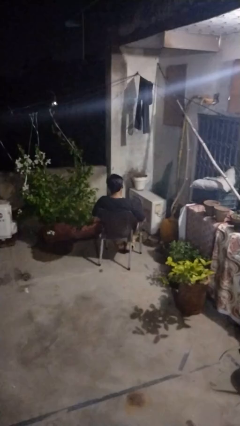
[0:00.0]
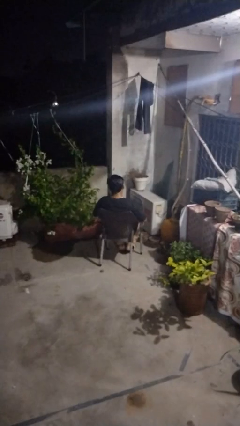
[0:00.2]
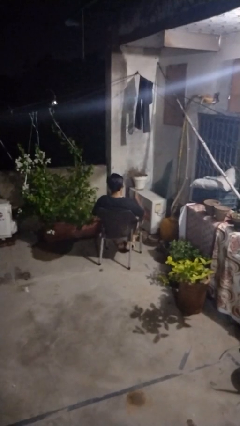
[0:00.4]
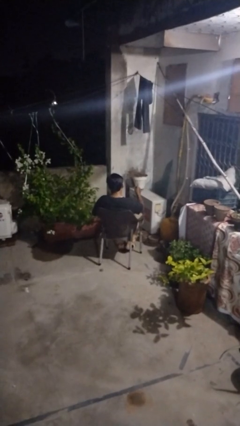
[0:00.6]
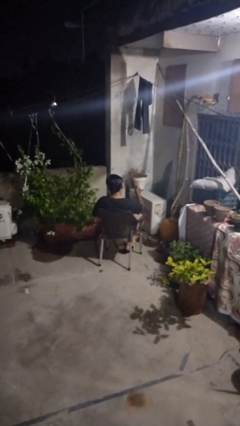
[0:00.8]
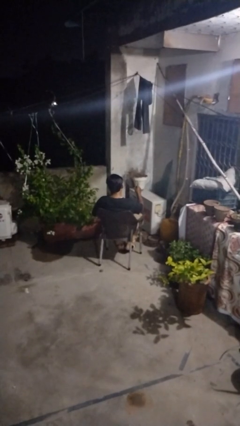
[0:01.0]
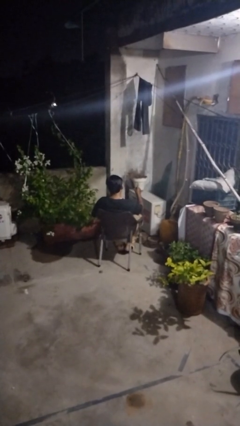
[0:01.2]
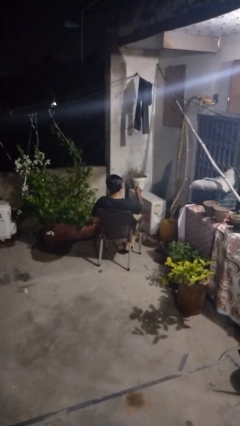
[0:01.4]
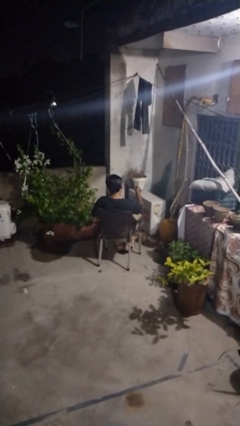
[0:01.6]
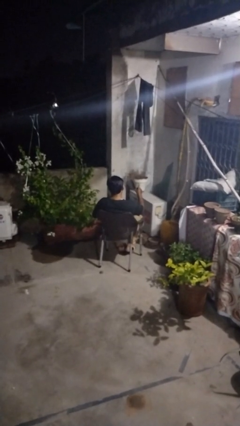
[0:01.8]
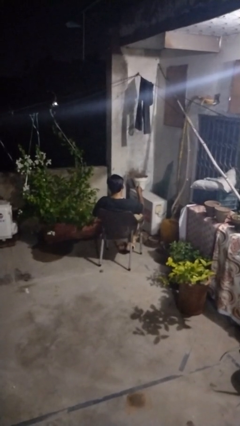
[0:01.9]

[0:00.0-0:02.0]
person gestures number one

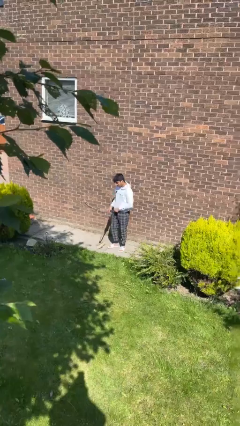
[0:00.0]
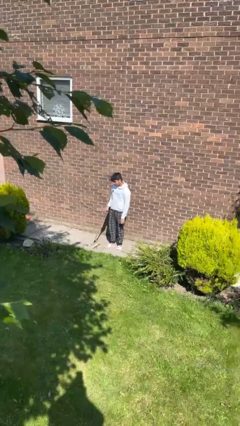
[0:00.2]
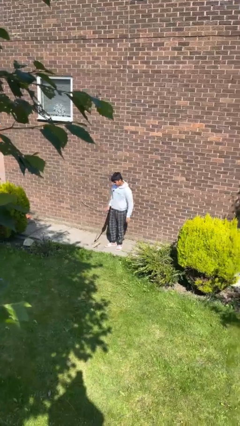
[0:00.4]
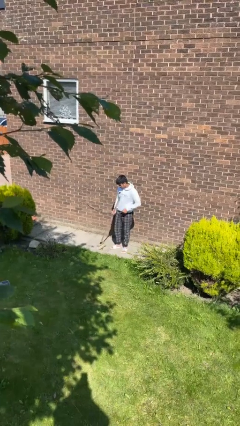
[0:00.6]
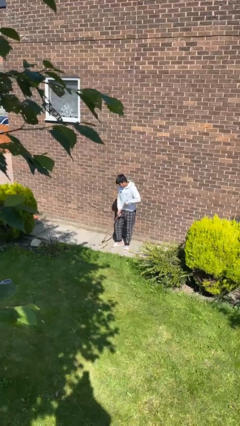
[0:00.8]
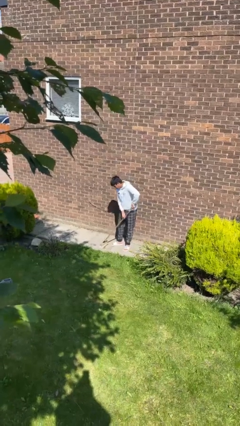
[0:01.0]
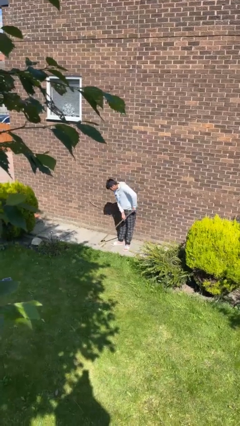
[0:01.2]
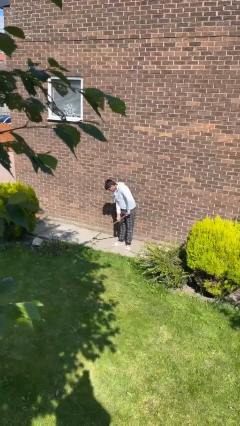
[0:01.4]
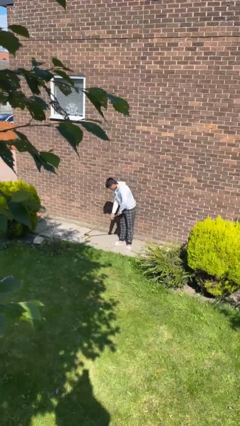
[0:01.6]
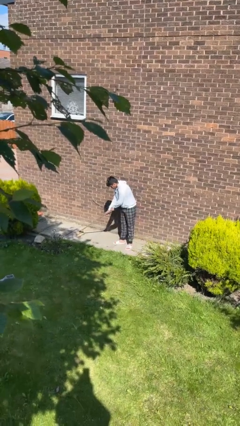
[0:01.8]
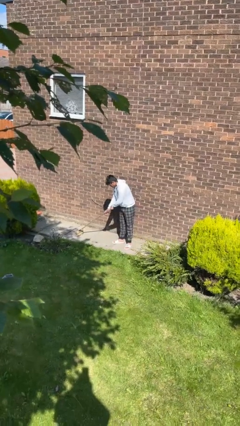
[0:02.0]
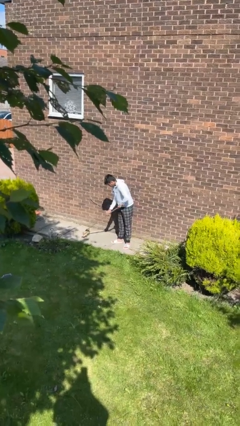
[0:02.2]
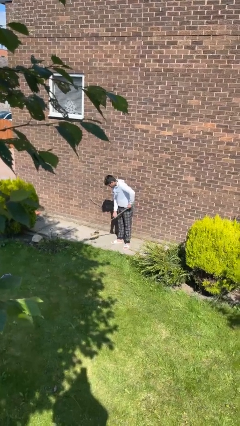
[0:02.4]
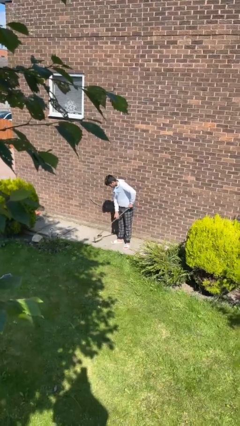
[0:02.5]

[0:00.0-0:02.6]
person sweeps floor

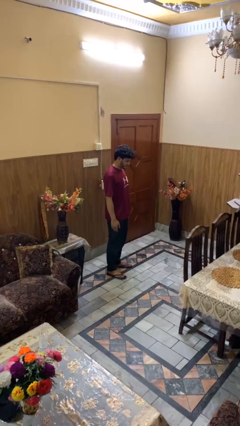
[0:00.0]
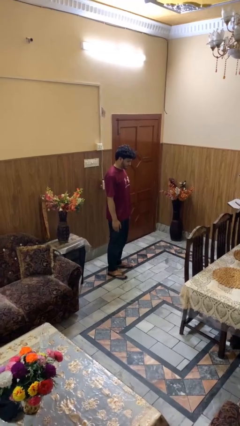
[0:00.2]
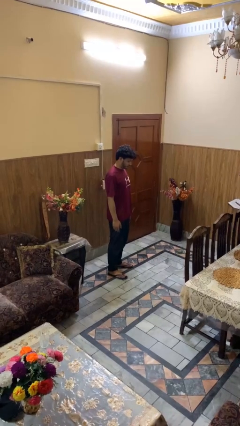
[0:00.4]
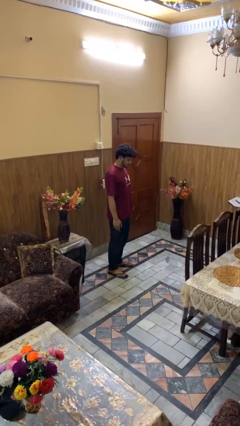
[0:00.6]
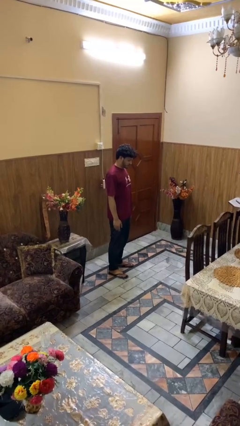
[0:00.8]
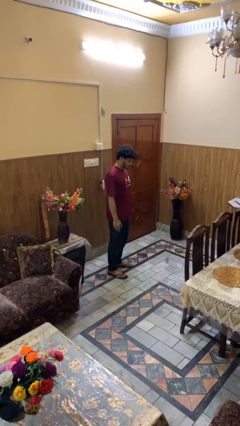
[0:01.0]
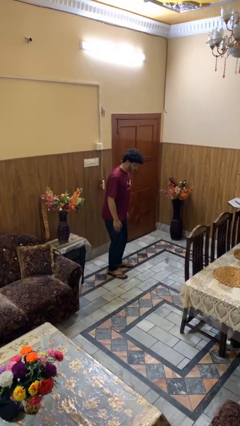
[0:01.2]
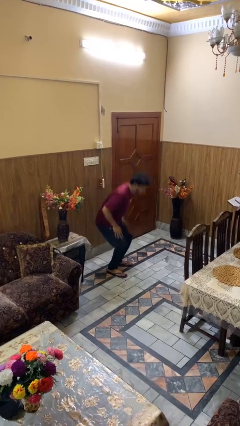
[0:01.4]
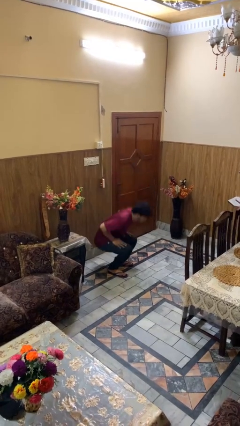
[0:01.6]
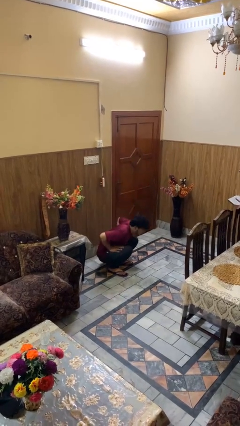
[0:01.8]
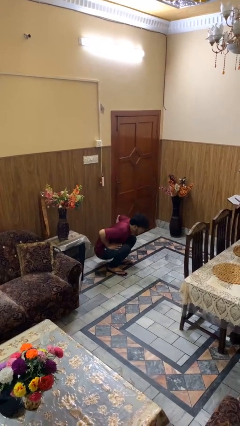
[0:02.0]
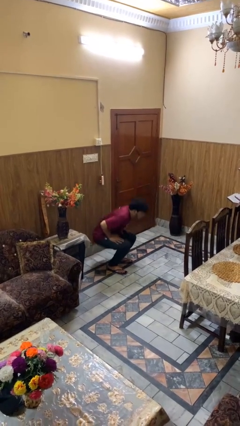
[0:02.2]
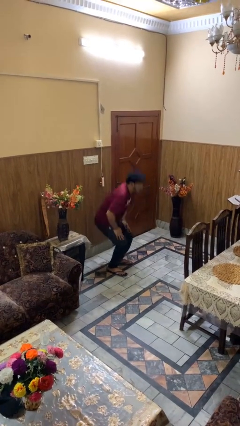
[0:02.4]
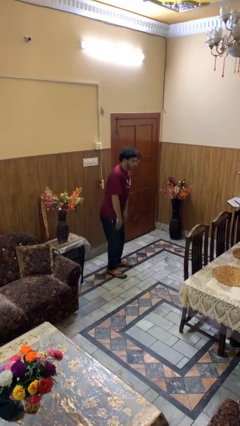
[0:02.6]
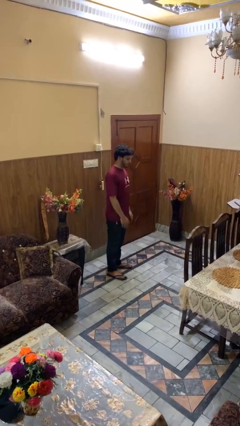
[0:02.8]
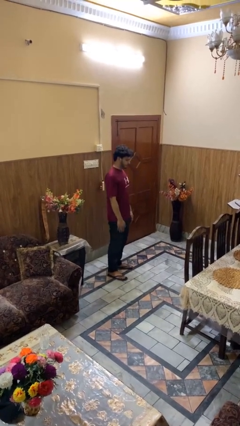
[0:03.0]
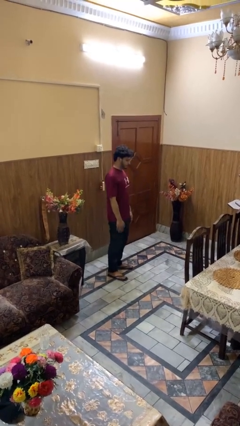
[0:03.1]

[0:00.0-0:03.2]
person exercises with situp

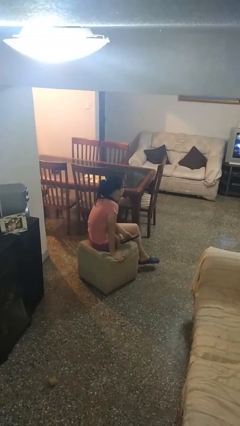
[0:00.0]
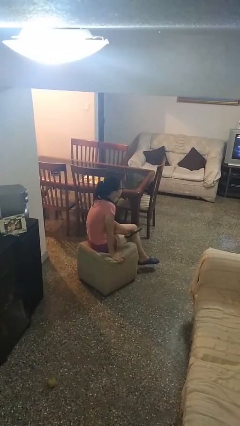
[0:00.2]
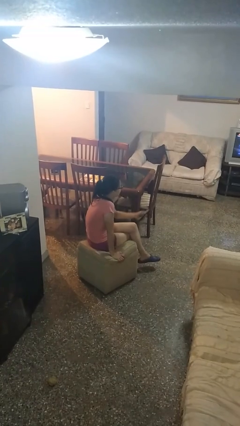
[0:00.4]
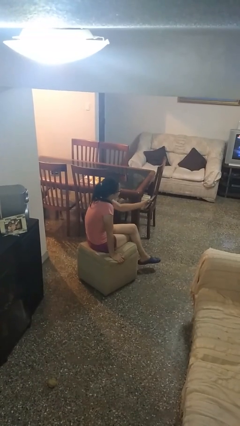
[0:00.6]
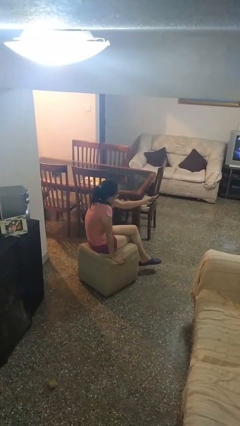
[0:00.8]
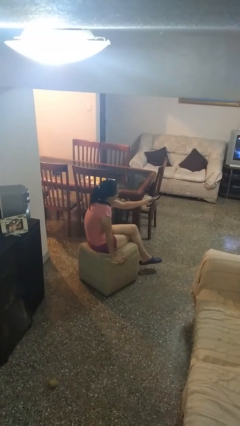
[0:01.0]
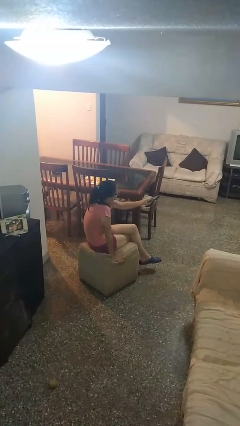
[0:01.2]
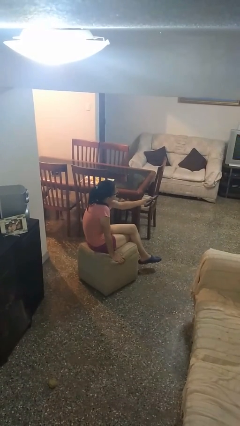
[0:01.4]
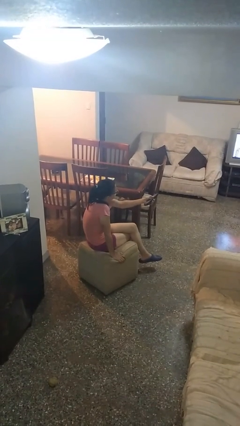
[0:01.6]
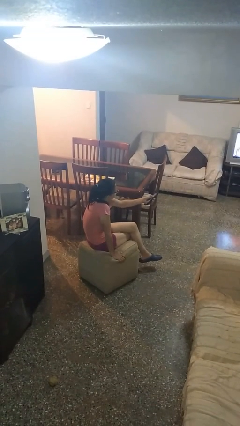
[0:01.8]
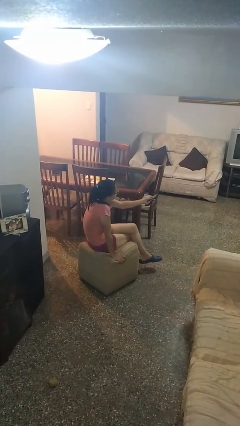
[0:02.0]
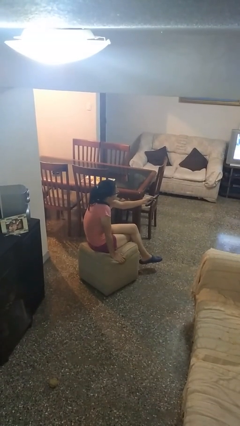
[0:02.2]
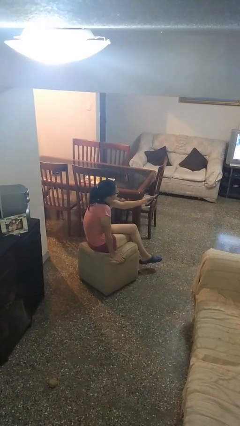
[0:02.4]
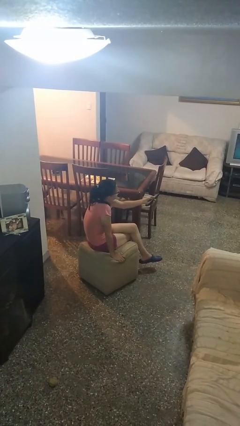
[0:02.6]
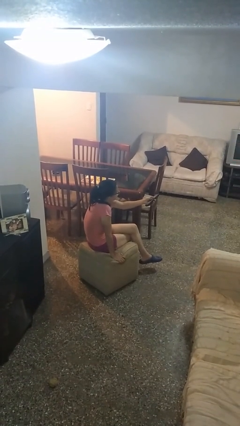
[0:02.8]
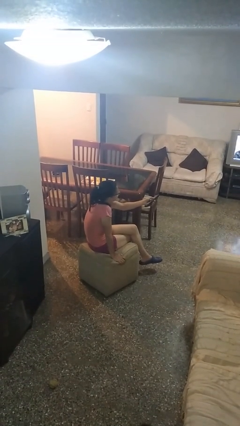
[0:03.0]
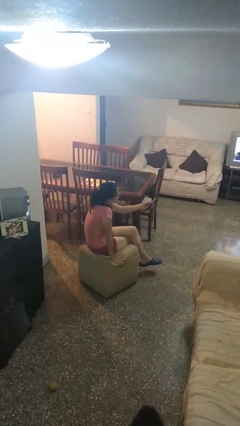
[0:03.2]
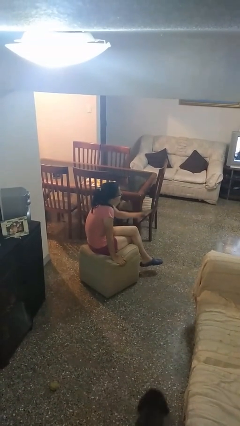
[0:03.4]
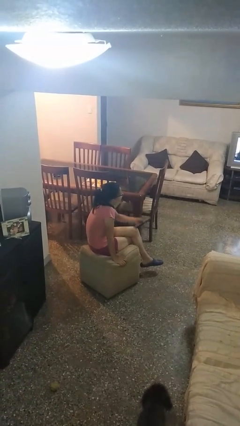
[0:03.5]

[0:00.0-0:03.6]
person uses television remote

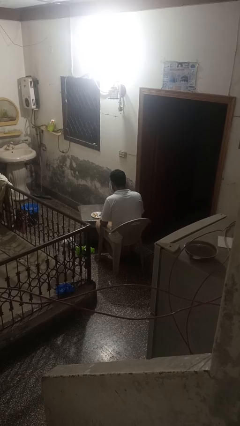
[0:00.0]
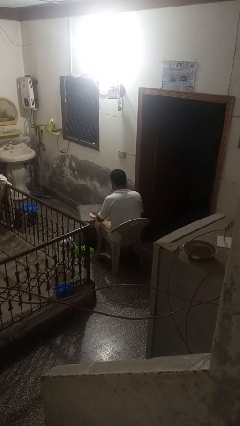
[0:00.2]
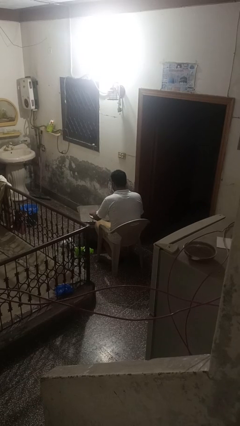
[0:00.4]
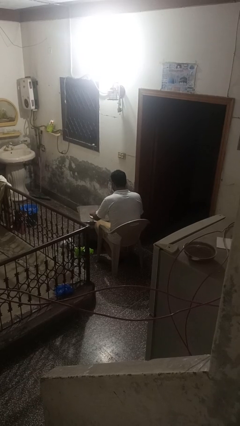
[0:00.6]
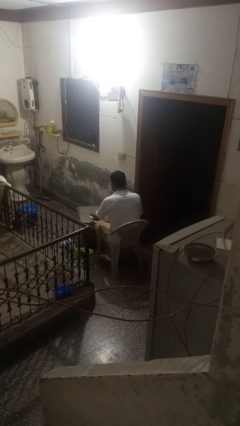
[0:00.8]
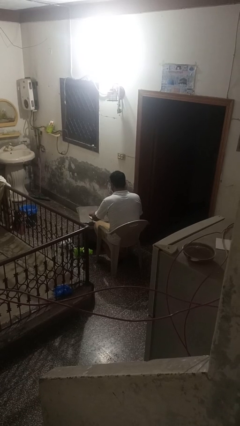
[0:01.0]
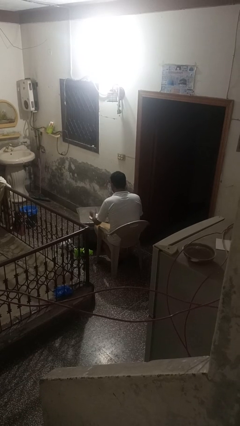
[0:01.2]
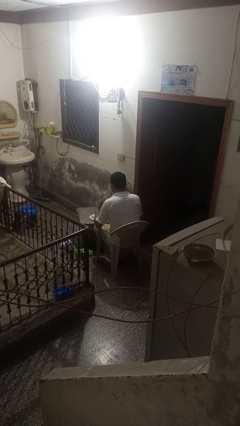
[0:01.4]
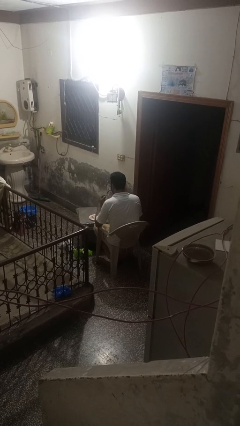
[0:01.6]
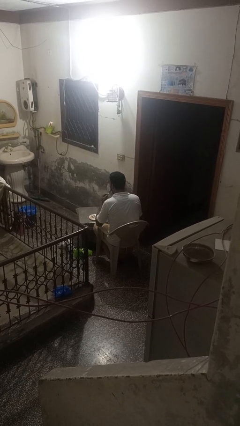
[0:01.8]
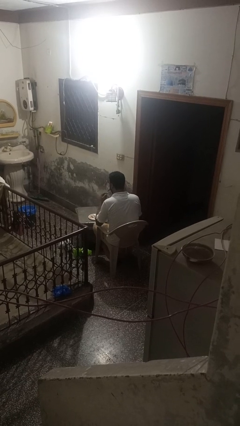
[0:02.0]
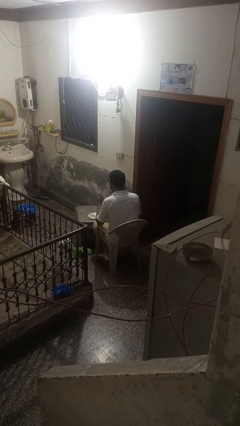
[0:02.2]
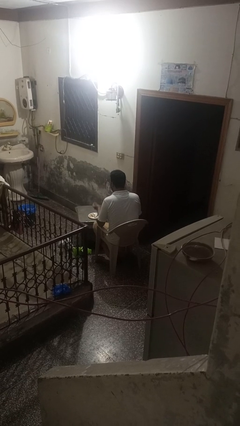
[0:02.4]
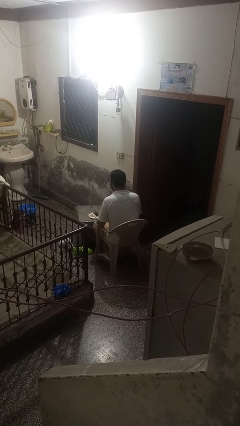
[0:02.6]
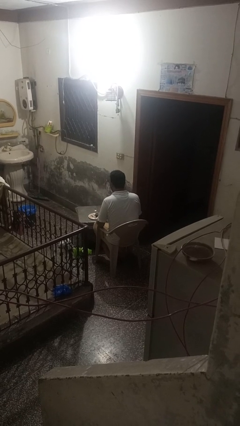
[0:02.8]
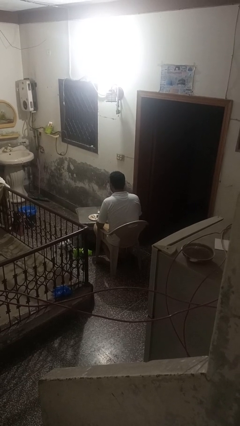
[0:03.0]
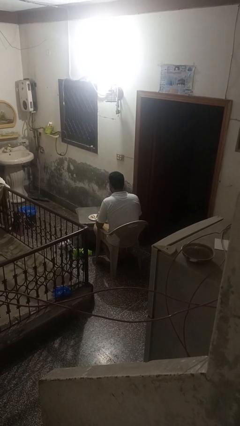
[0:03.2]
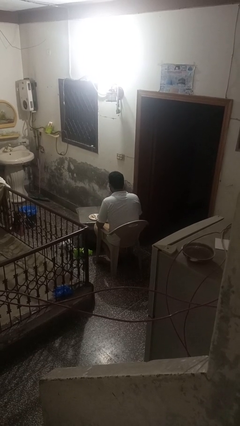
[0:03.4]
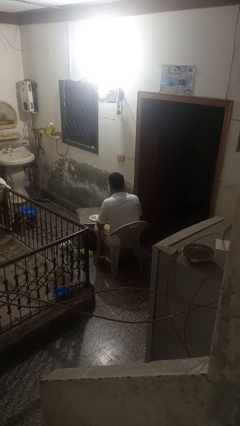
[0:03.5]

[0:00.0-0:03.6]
person eats with utensil

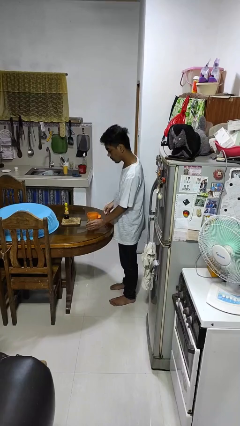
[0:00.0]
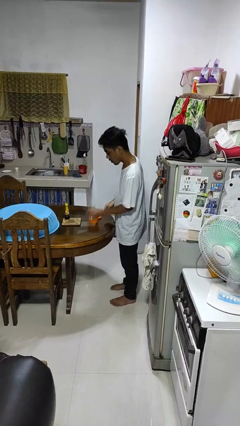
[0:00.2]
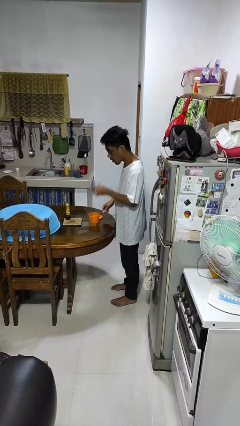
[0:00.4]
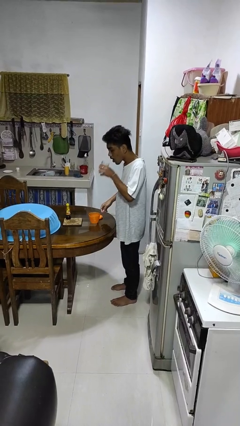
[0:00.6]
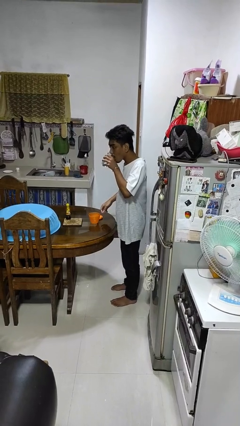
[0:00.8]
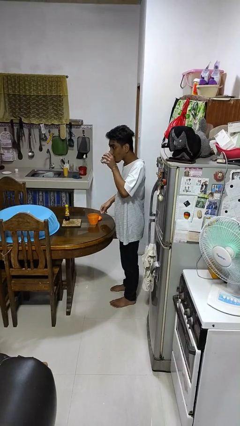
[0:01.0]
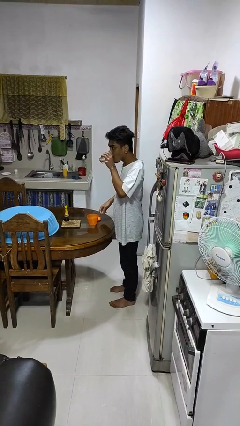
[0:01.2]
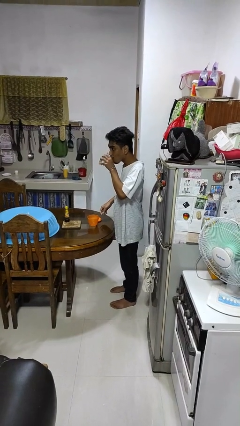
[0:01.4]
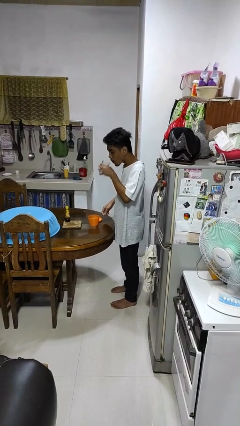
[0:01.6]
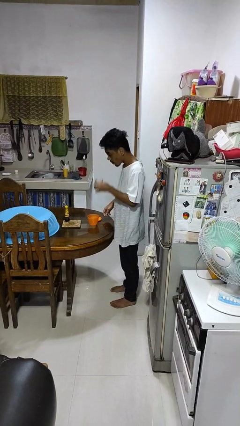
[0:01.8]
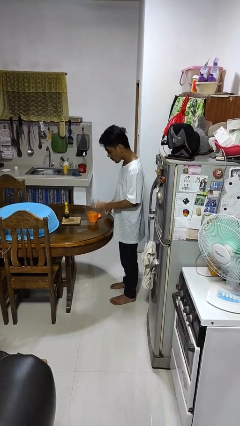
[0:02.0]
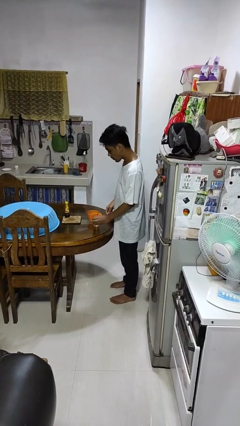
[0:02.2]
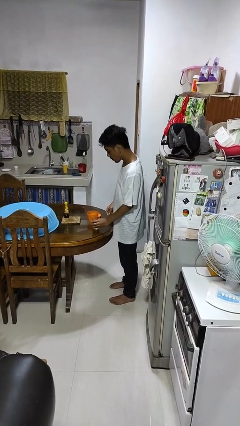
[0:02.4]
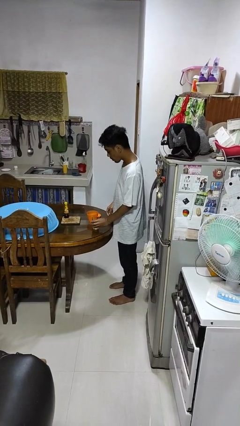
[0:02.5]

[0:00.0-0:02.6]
person drinks from cup
